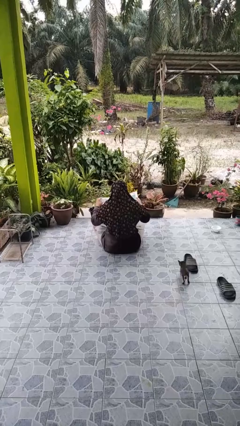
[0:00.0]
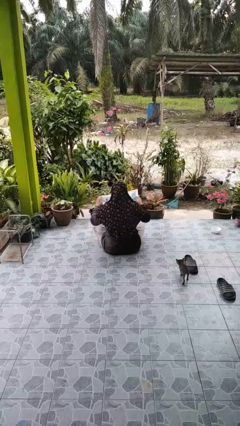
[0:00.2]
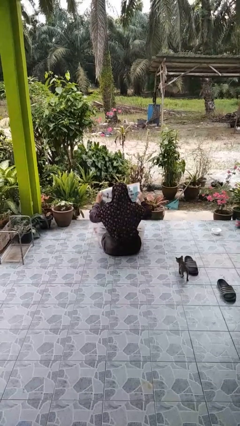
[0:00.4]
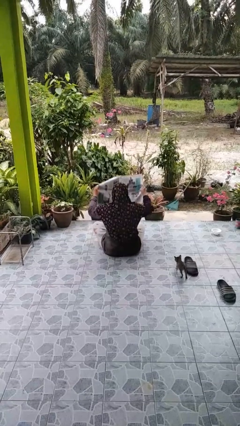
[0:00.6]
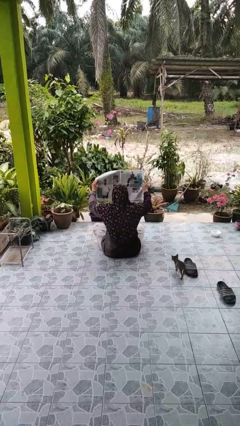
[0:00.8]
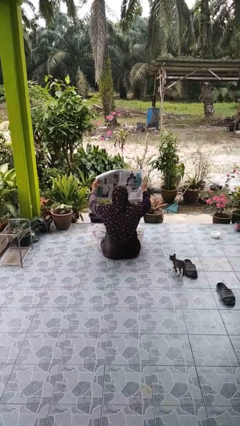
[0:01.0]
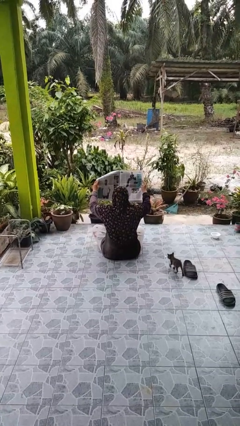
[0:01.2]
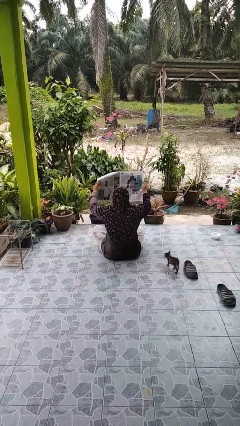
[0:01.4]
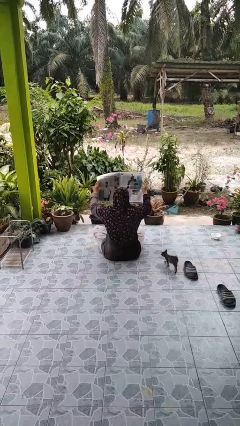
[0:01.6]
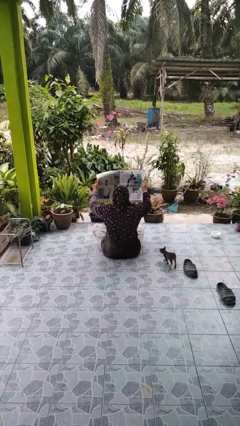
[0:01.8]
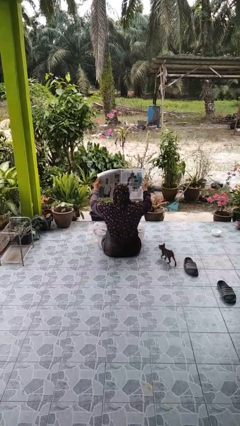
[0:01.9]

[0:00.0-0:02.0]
person reads newspaper

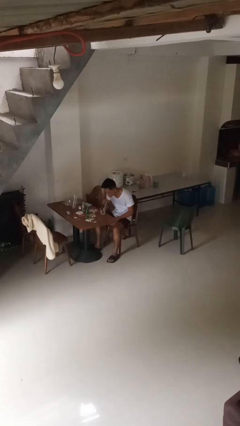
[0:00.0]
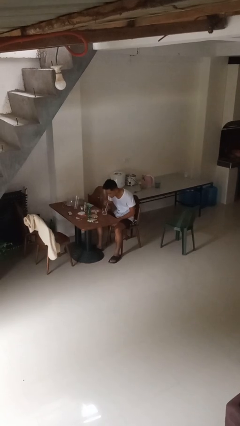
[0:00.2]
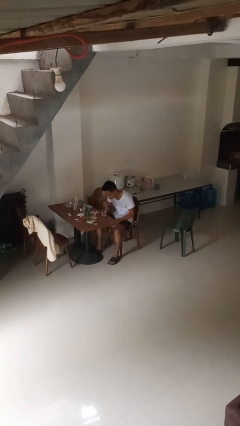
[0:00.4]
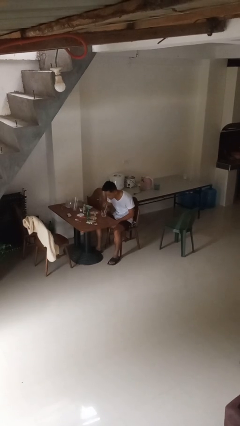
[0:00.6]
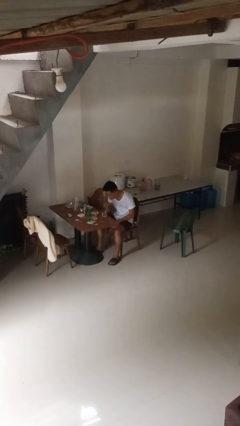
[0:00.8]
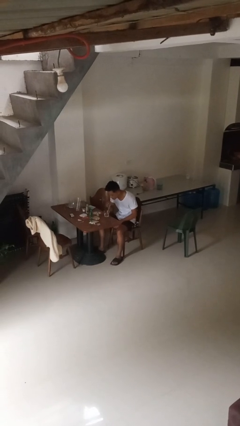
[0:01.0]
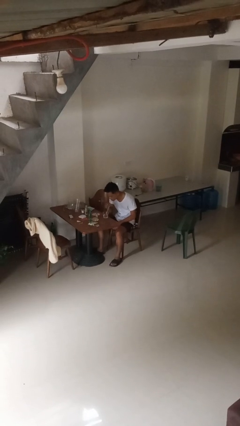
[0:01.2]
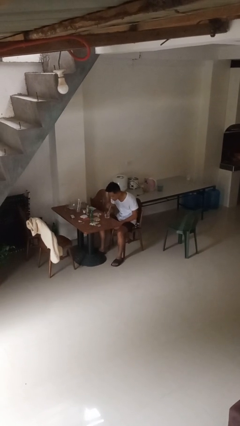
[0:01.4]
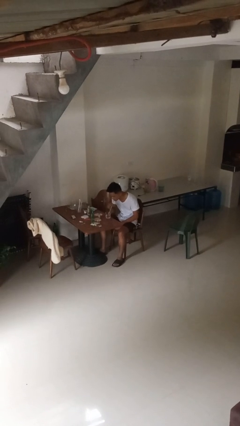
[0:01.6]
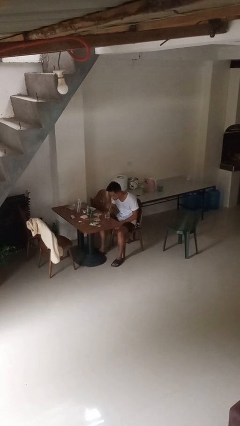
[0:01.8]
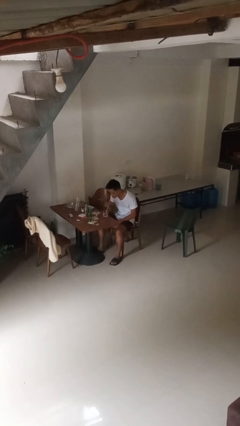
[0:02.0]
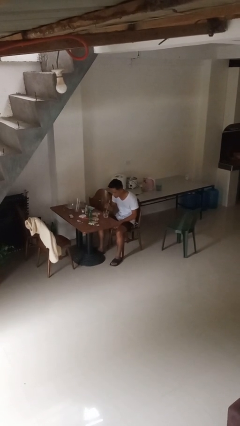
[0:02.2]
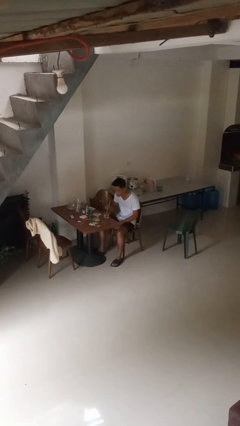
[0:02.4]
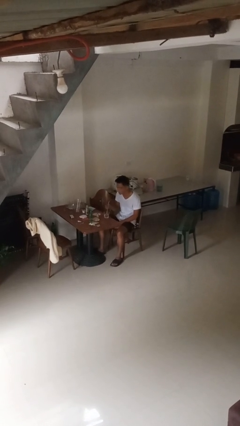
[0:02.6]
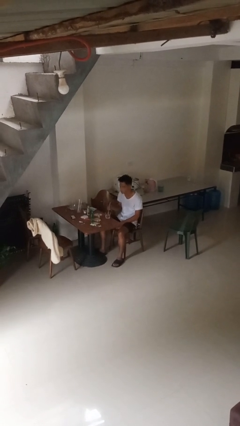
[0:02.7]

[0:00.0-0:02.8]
person drinks from straw

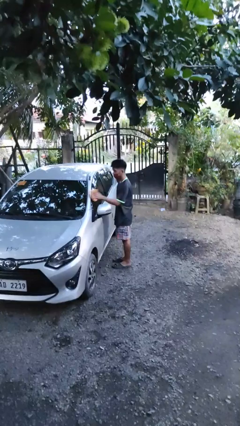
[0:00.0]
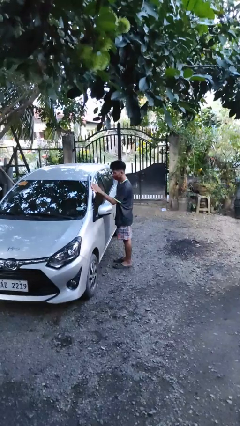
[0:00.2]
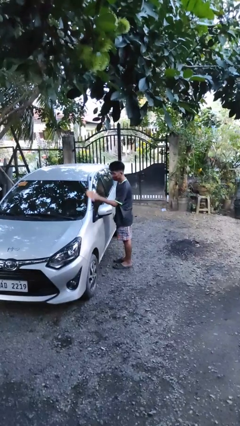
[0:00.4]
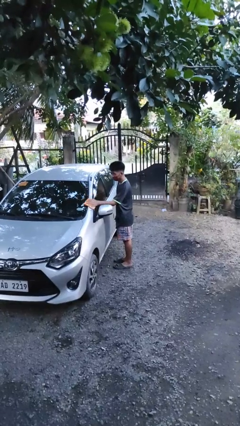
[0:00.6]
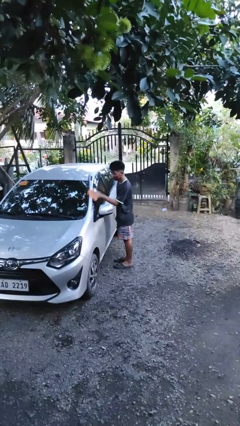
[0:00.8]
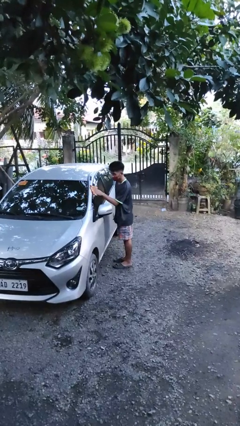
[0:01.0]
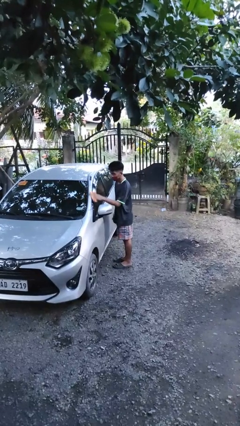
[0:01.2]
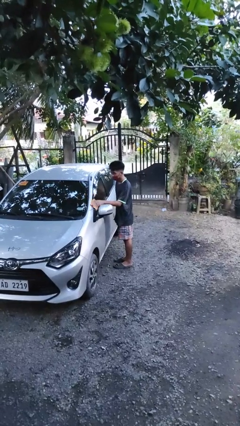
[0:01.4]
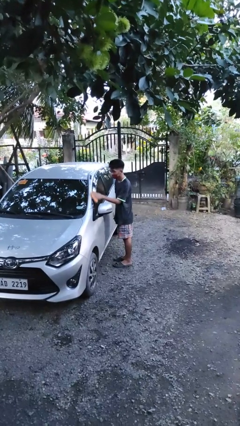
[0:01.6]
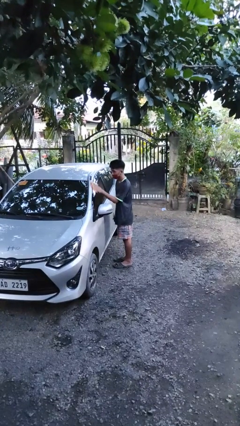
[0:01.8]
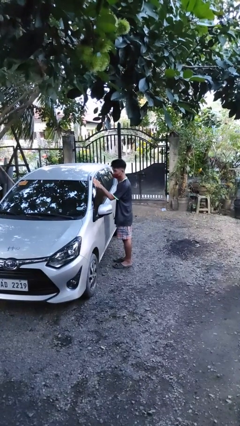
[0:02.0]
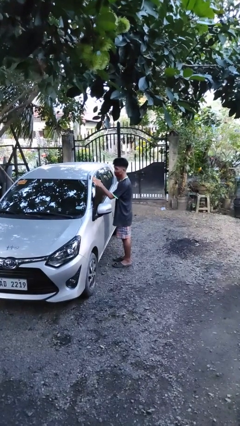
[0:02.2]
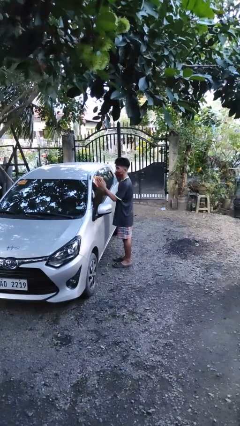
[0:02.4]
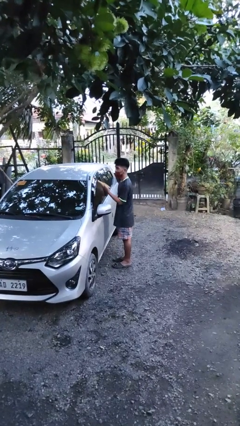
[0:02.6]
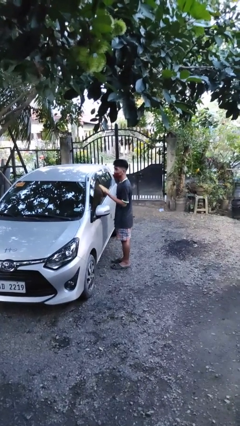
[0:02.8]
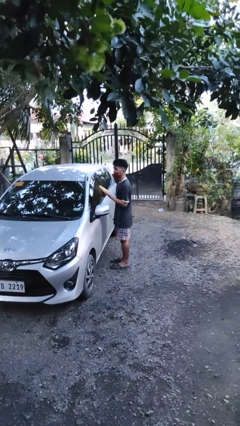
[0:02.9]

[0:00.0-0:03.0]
person polishes car with rag

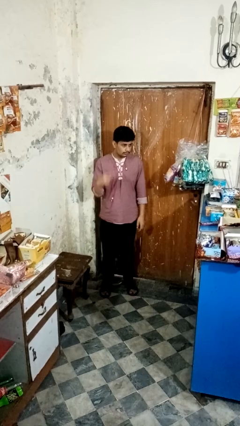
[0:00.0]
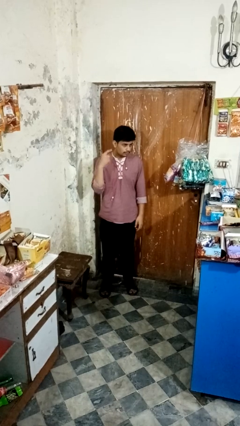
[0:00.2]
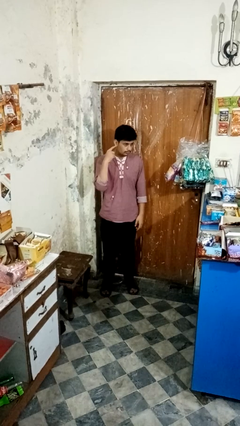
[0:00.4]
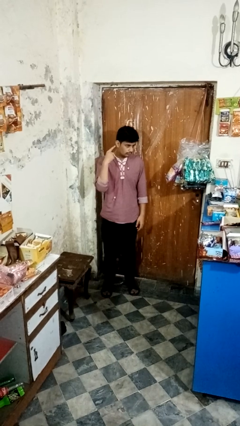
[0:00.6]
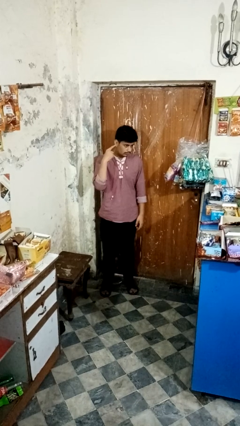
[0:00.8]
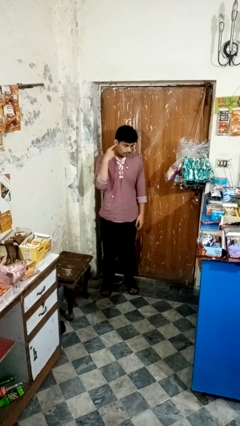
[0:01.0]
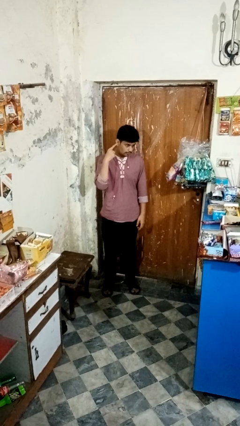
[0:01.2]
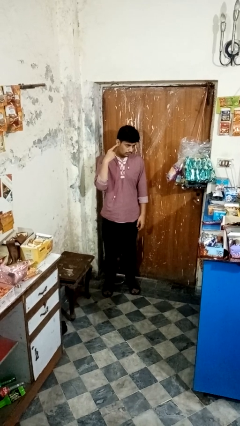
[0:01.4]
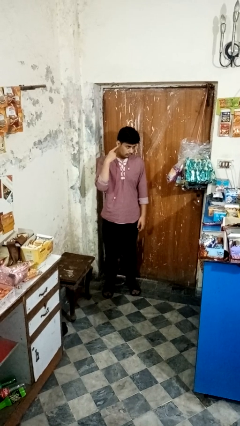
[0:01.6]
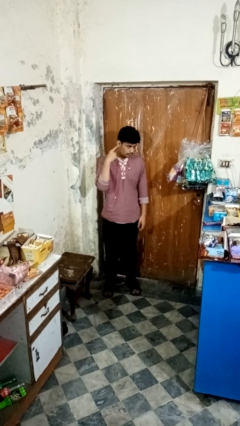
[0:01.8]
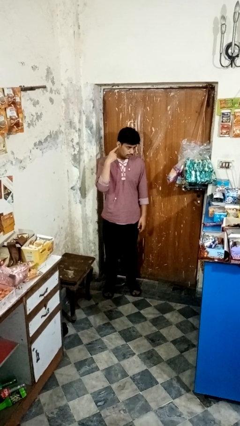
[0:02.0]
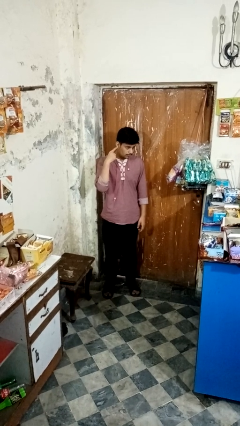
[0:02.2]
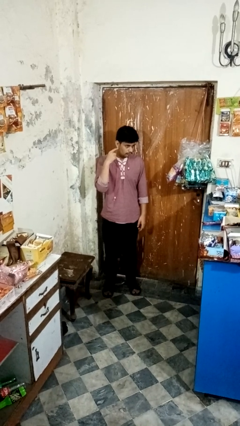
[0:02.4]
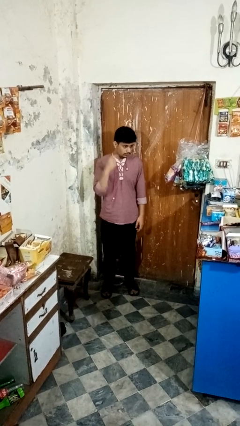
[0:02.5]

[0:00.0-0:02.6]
person gestures listen closely

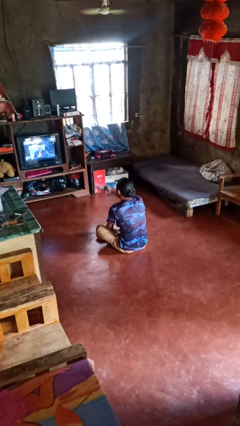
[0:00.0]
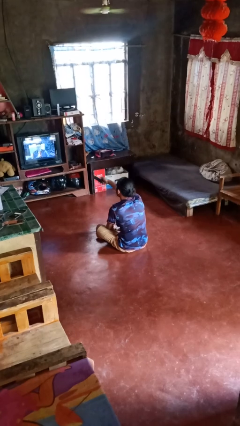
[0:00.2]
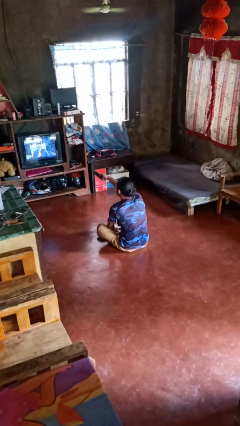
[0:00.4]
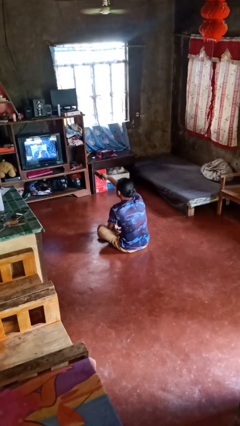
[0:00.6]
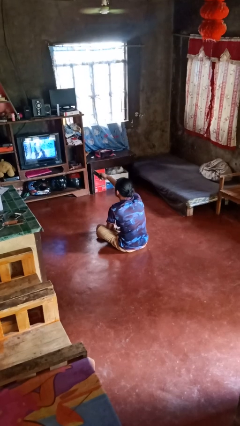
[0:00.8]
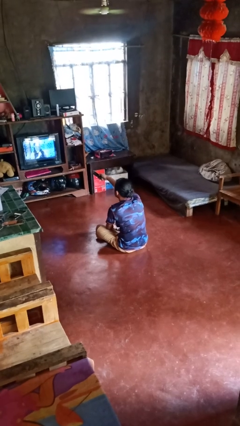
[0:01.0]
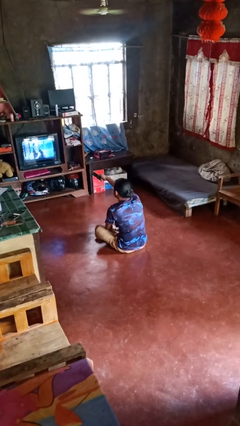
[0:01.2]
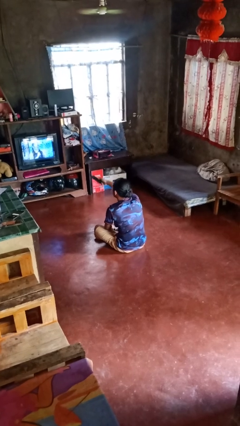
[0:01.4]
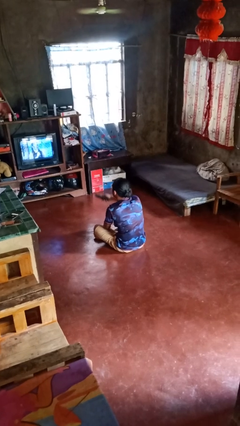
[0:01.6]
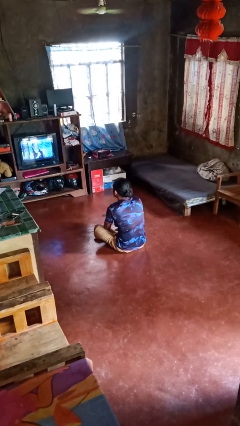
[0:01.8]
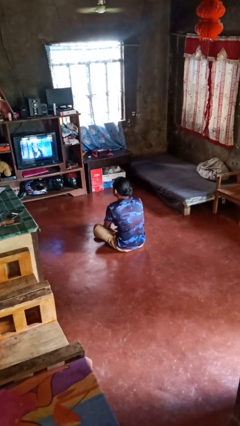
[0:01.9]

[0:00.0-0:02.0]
person uses television remote

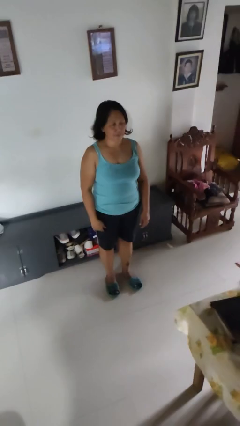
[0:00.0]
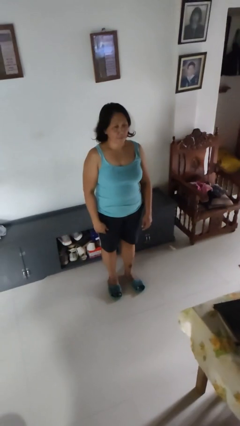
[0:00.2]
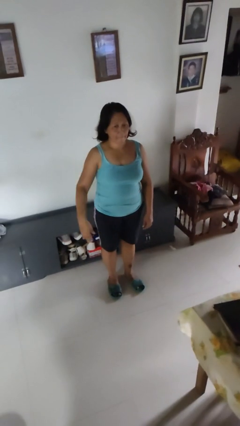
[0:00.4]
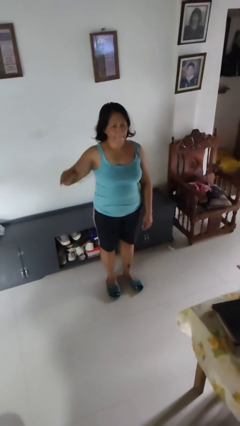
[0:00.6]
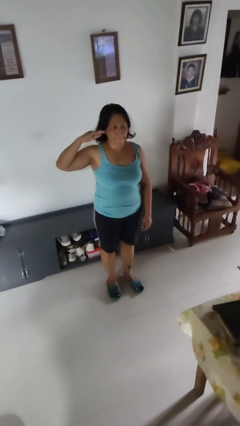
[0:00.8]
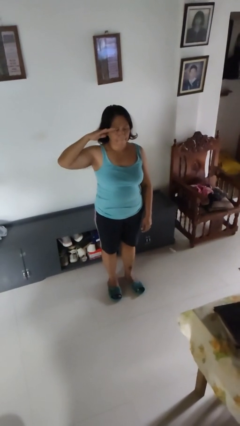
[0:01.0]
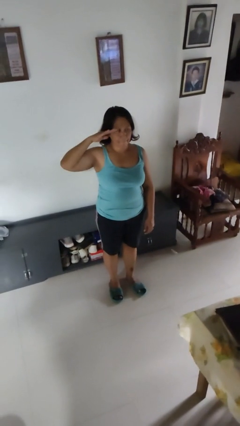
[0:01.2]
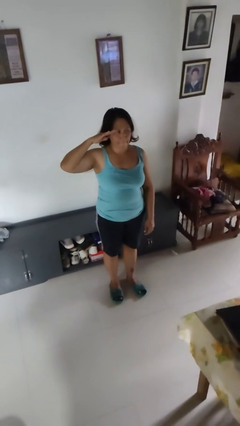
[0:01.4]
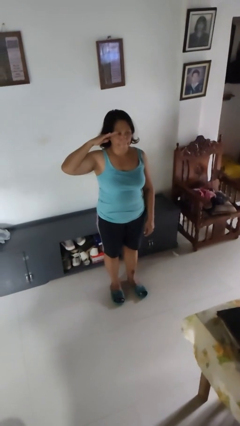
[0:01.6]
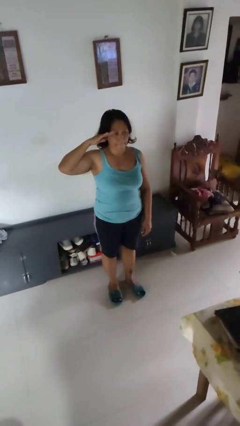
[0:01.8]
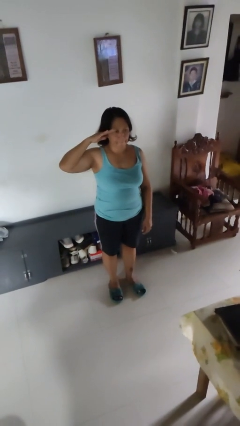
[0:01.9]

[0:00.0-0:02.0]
person salutes

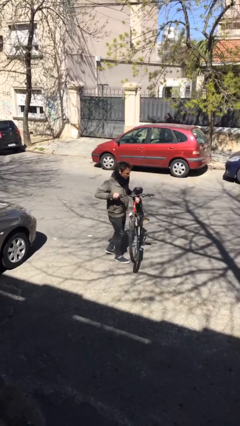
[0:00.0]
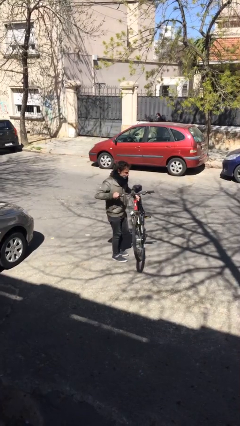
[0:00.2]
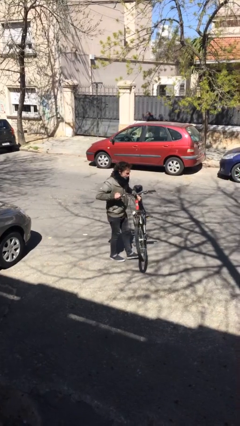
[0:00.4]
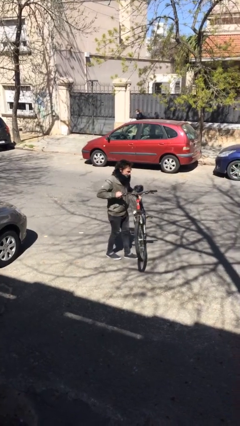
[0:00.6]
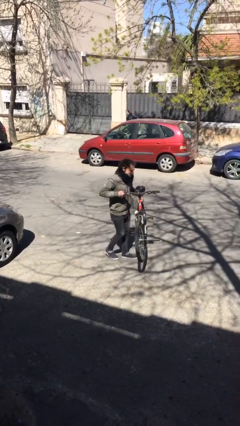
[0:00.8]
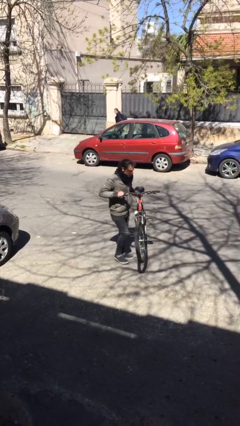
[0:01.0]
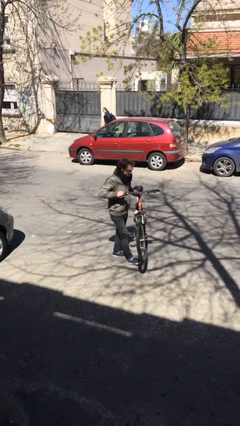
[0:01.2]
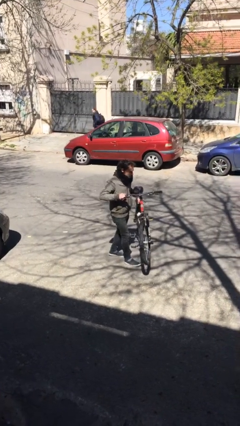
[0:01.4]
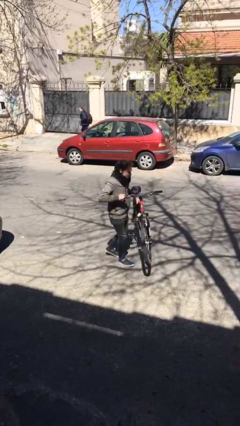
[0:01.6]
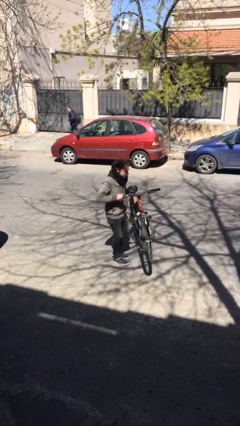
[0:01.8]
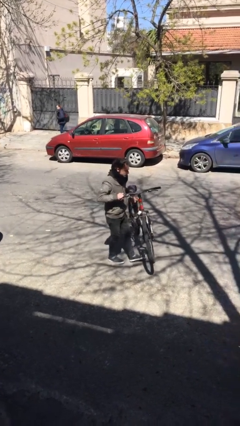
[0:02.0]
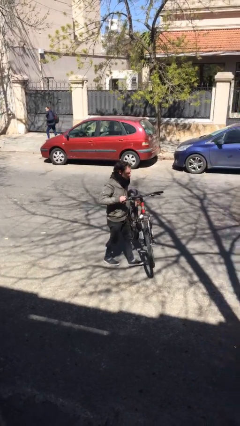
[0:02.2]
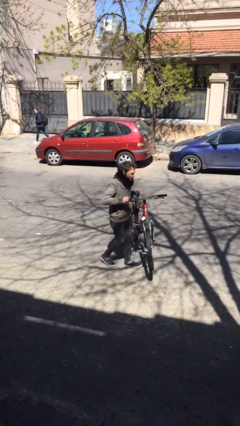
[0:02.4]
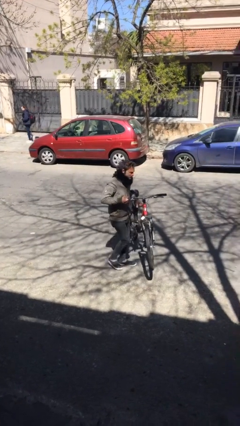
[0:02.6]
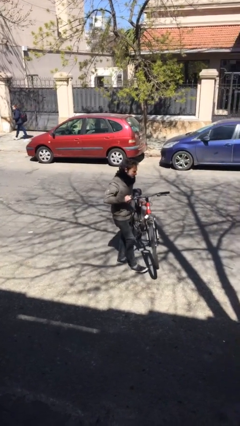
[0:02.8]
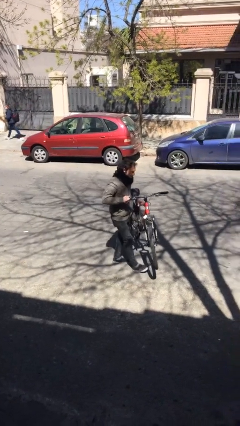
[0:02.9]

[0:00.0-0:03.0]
person carries heavy object
